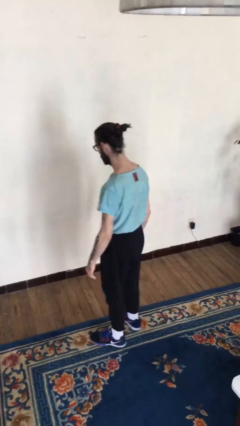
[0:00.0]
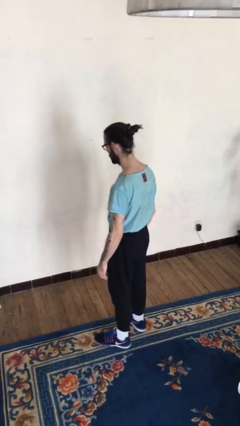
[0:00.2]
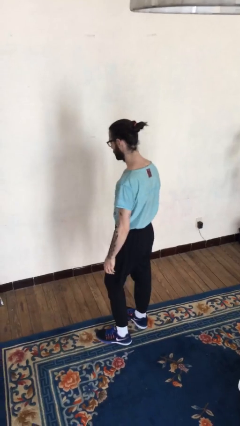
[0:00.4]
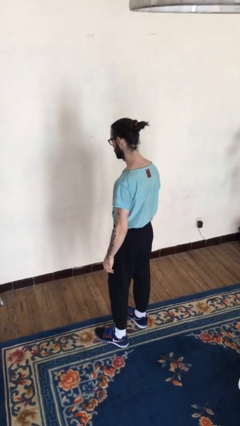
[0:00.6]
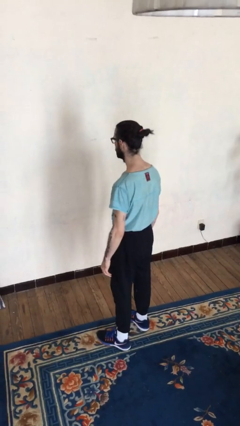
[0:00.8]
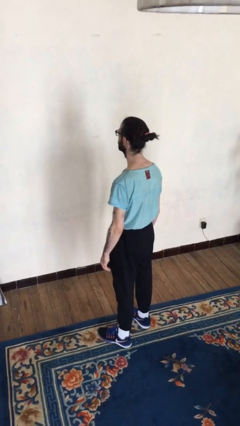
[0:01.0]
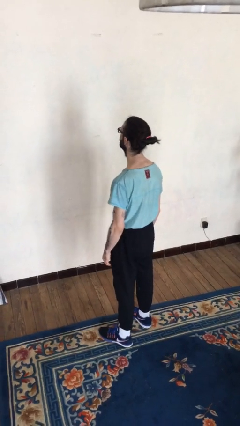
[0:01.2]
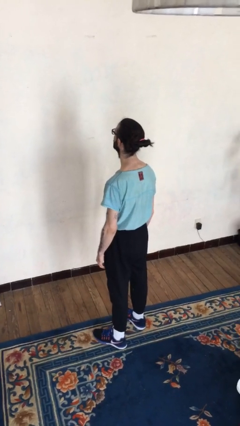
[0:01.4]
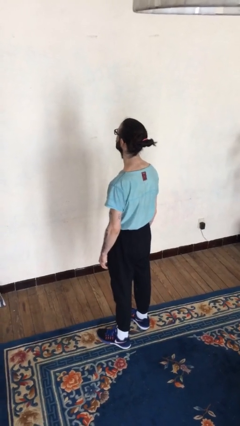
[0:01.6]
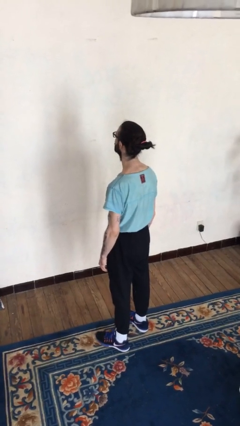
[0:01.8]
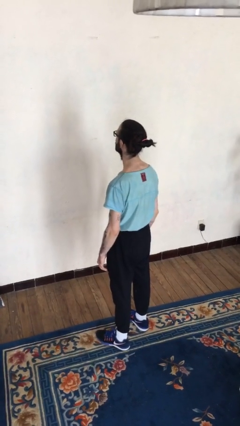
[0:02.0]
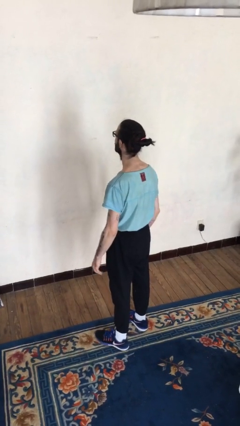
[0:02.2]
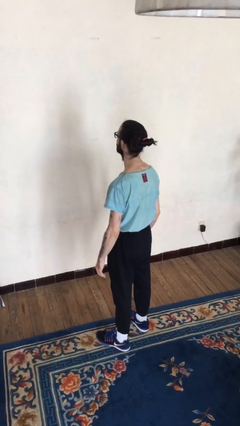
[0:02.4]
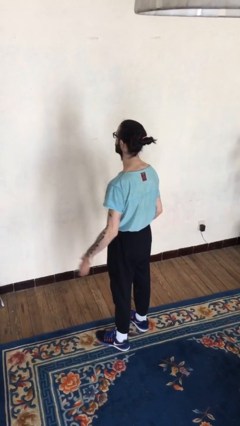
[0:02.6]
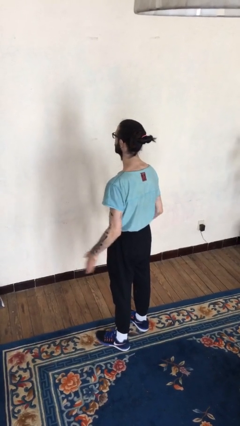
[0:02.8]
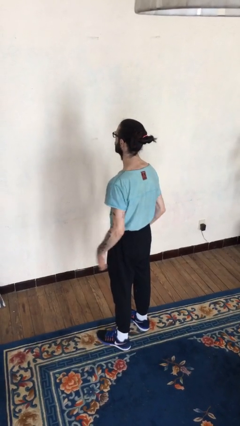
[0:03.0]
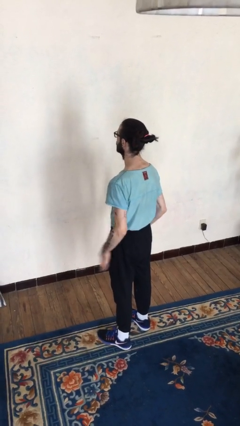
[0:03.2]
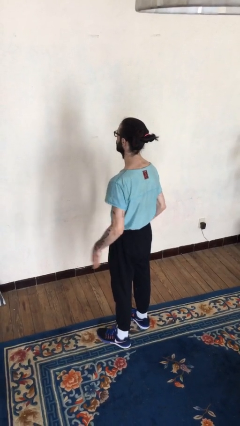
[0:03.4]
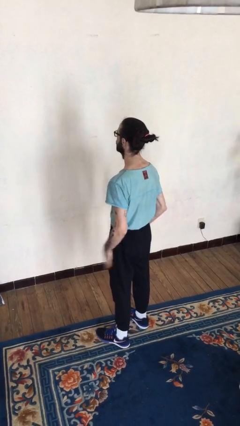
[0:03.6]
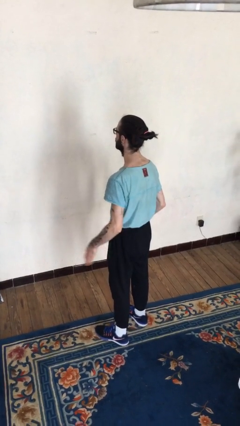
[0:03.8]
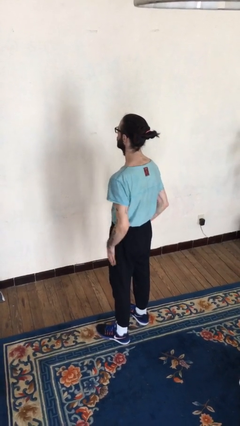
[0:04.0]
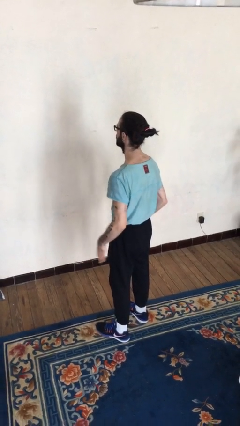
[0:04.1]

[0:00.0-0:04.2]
person slaps hands on thighs

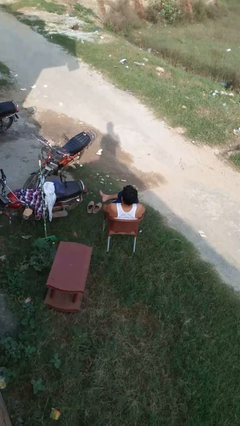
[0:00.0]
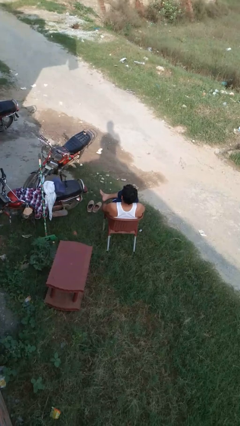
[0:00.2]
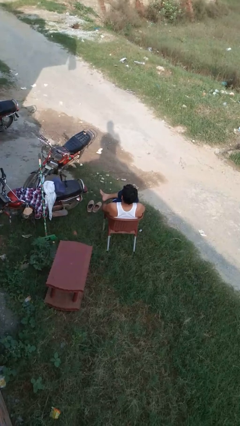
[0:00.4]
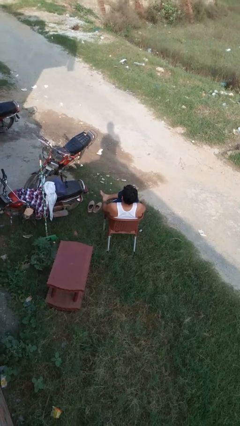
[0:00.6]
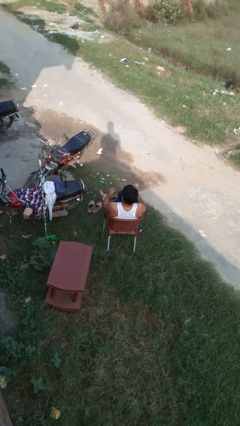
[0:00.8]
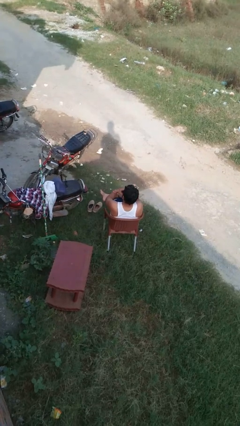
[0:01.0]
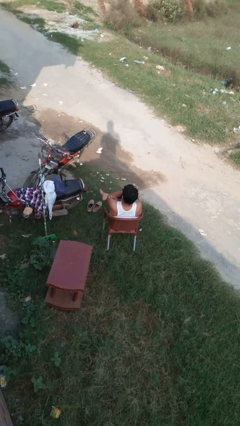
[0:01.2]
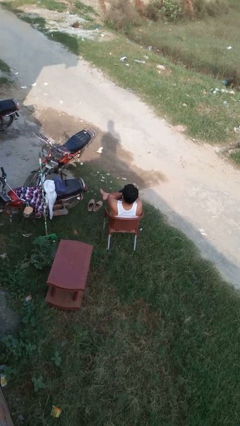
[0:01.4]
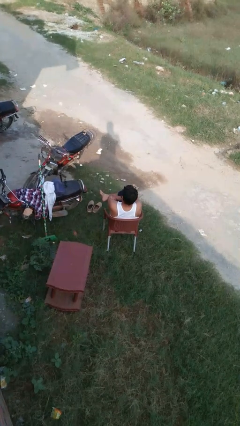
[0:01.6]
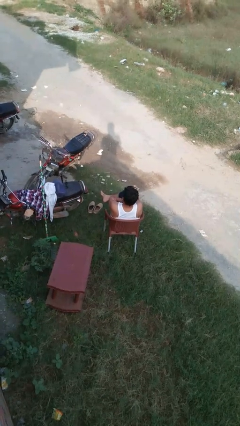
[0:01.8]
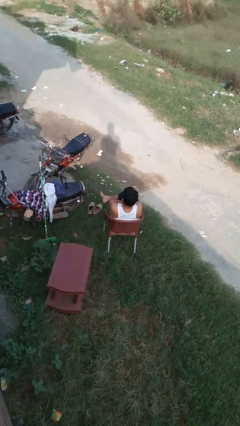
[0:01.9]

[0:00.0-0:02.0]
person crosses arms

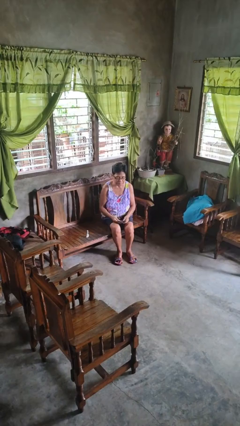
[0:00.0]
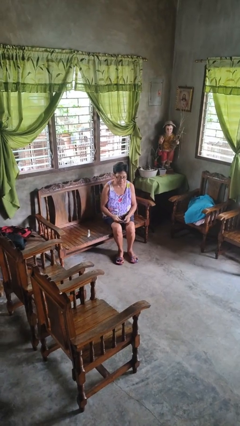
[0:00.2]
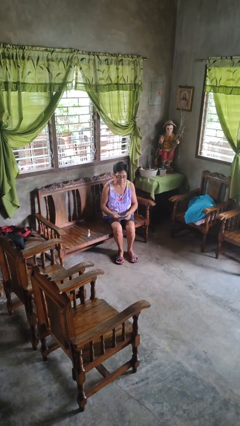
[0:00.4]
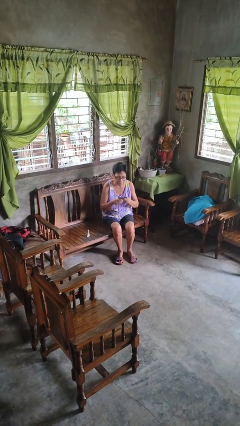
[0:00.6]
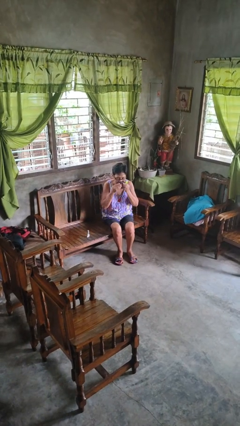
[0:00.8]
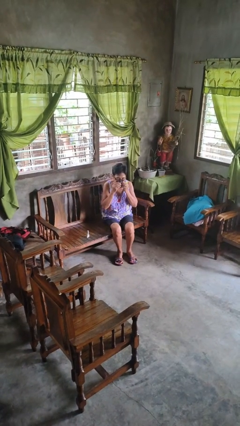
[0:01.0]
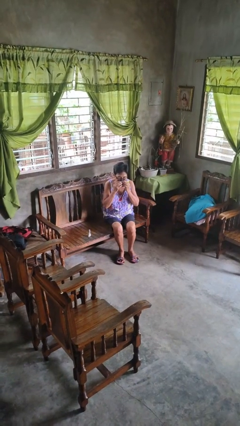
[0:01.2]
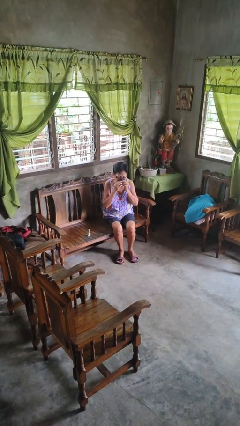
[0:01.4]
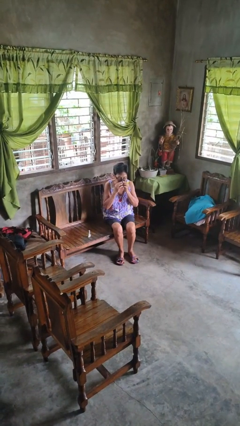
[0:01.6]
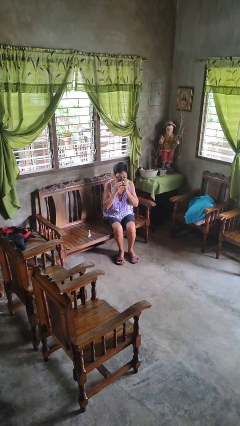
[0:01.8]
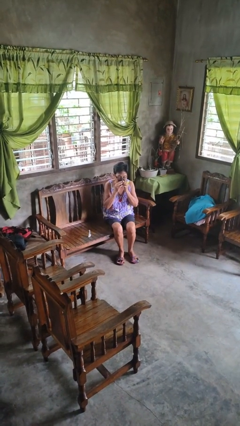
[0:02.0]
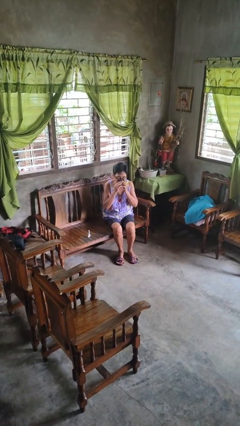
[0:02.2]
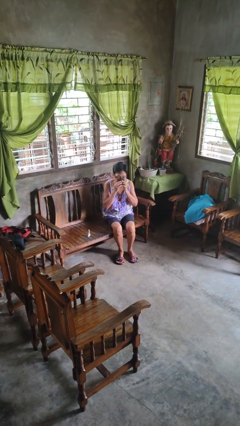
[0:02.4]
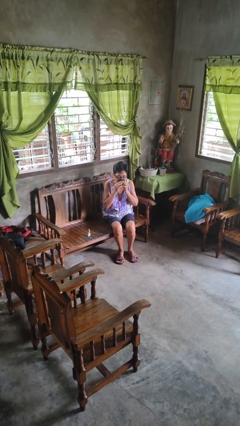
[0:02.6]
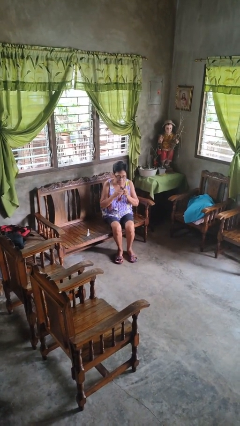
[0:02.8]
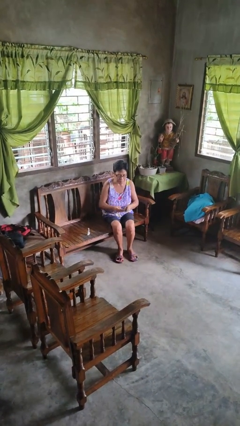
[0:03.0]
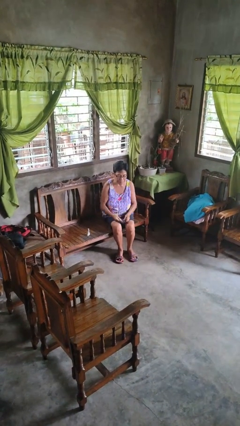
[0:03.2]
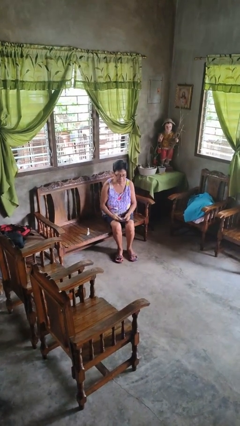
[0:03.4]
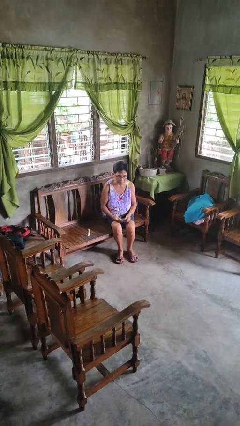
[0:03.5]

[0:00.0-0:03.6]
person blows nose

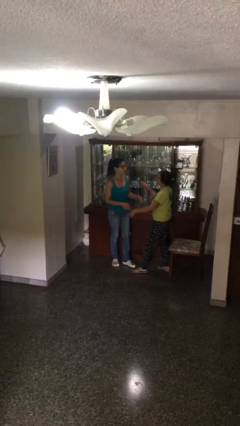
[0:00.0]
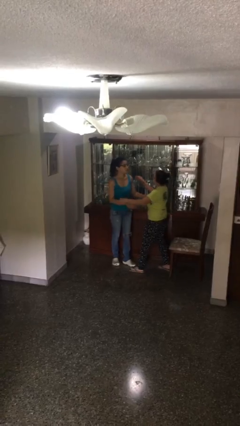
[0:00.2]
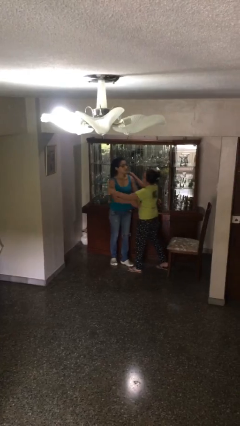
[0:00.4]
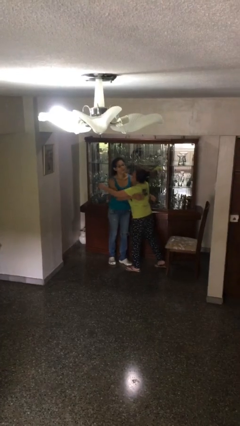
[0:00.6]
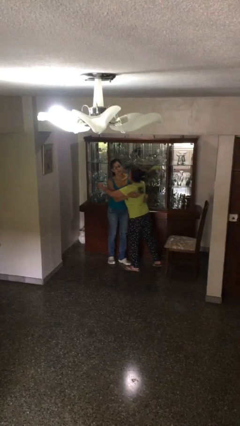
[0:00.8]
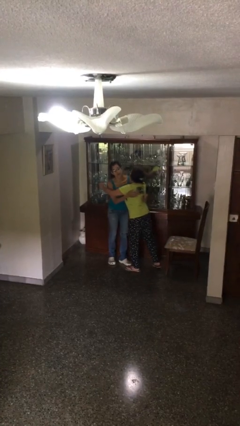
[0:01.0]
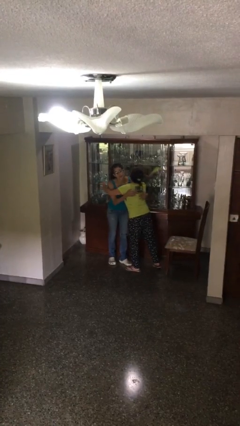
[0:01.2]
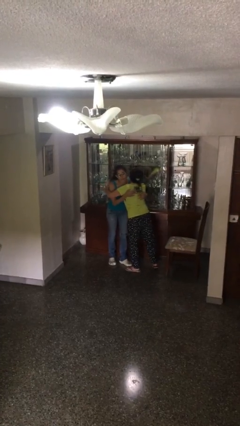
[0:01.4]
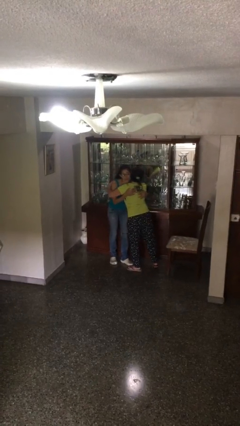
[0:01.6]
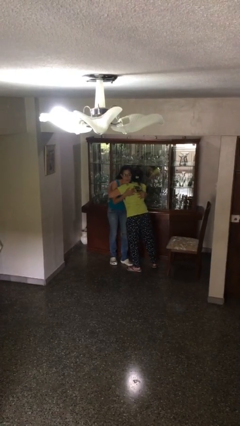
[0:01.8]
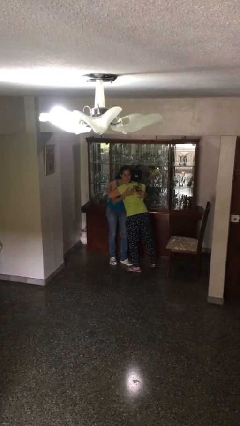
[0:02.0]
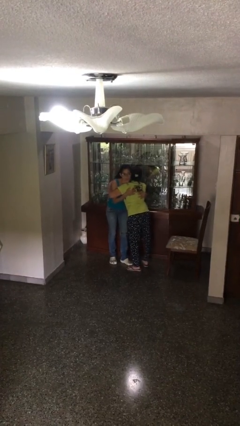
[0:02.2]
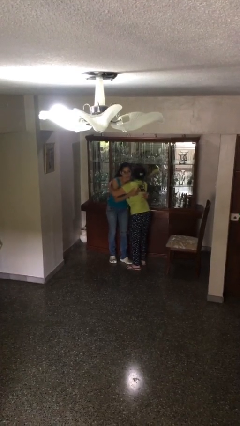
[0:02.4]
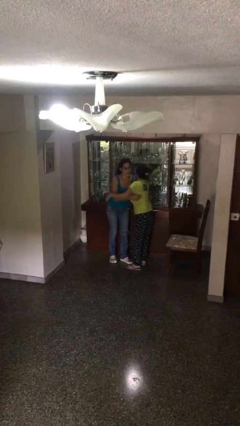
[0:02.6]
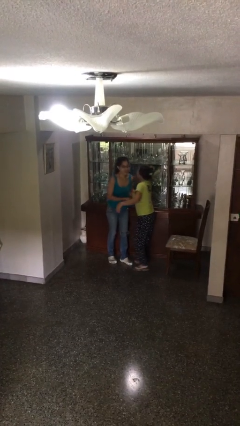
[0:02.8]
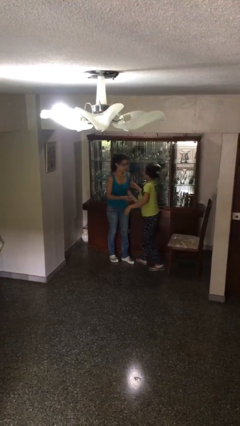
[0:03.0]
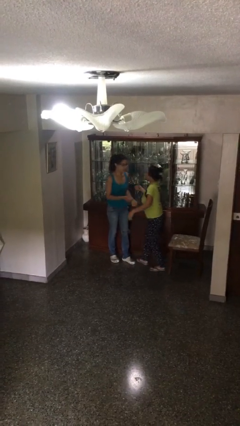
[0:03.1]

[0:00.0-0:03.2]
person embraces person

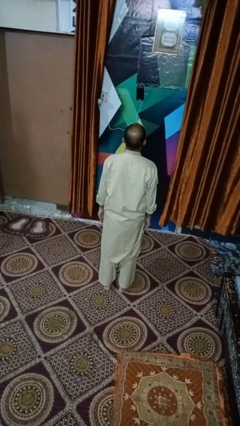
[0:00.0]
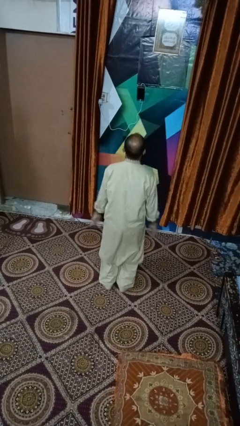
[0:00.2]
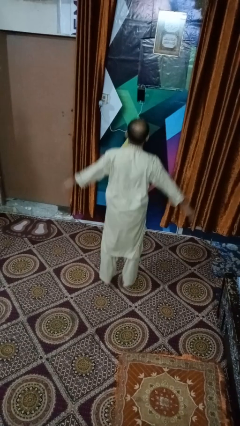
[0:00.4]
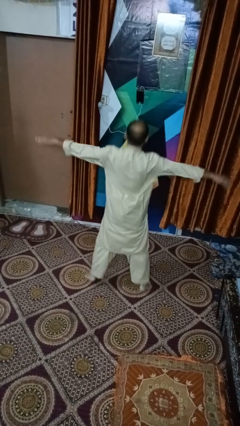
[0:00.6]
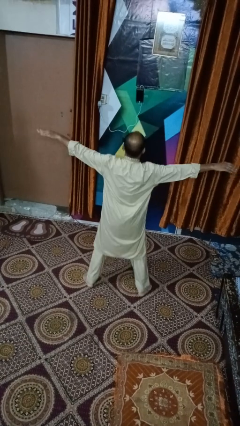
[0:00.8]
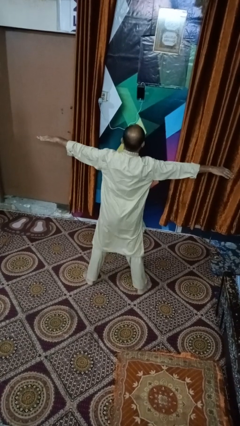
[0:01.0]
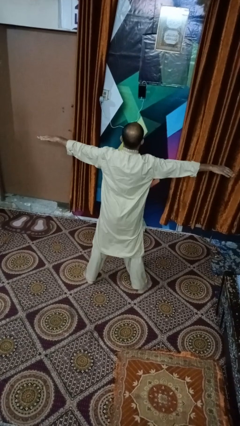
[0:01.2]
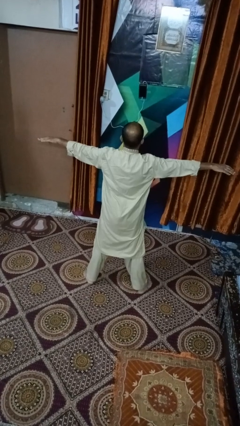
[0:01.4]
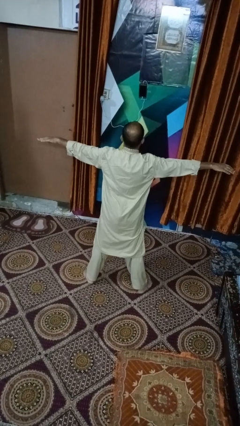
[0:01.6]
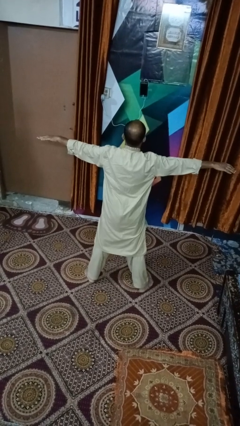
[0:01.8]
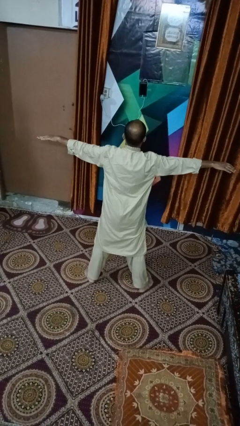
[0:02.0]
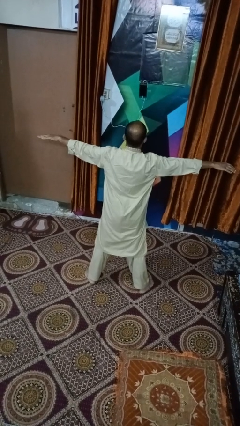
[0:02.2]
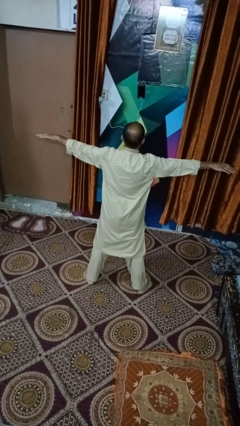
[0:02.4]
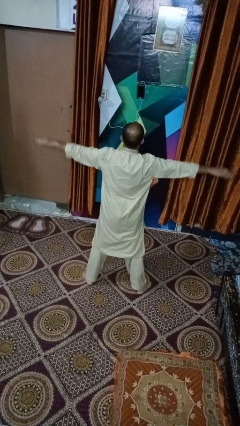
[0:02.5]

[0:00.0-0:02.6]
person exercises with jumping jacks

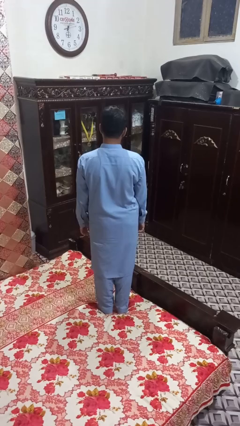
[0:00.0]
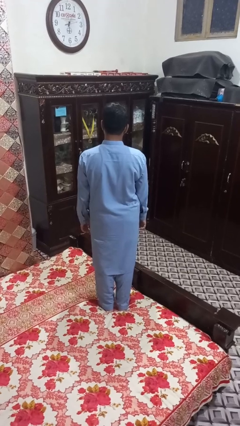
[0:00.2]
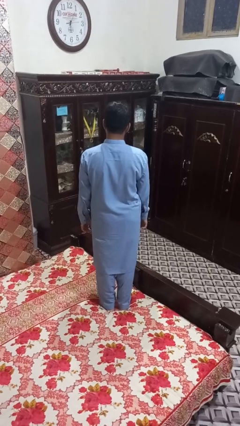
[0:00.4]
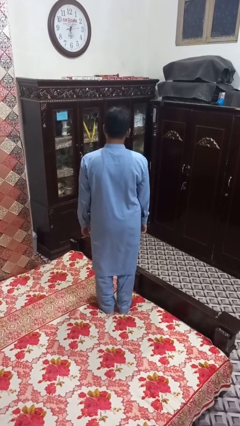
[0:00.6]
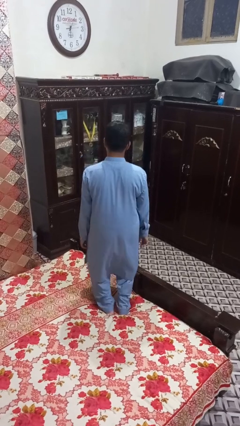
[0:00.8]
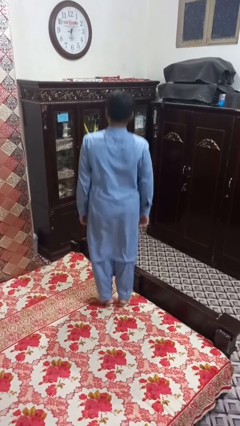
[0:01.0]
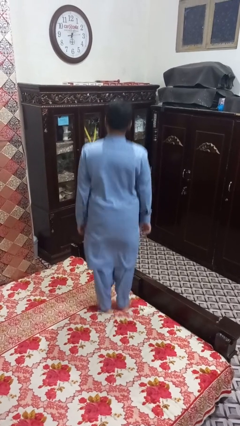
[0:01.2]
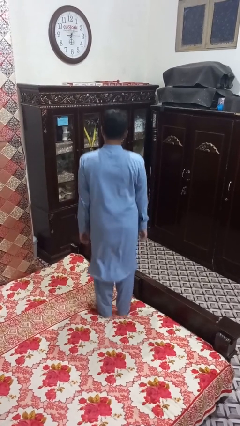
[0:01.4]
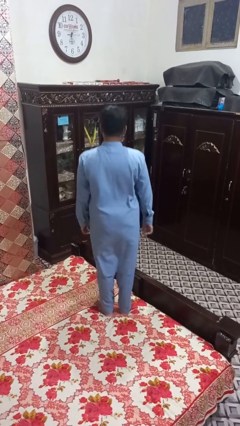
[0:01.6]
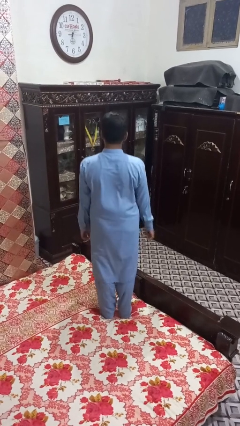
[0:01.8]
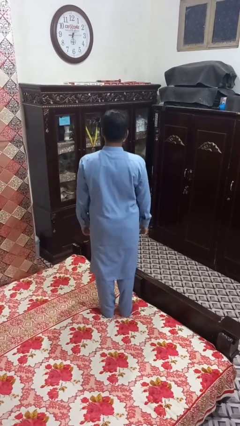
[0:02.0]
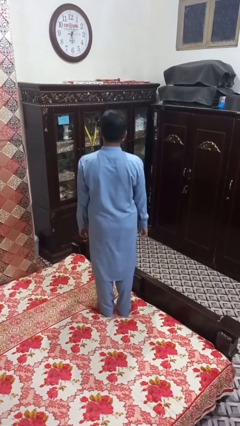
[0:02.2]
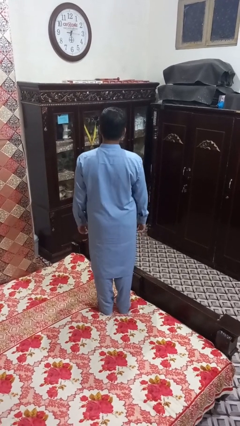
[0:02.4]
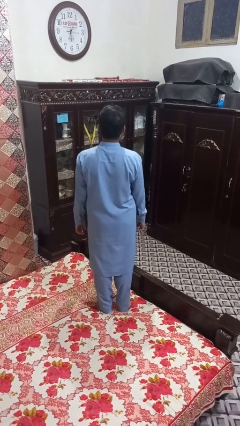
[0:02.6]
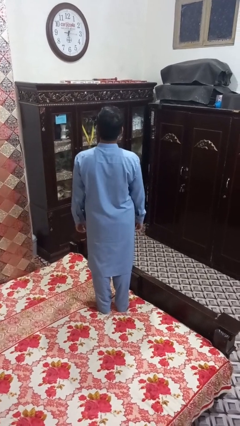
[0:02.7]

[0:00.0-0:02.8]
person jumps on bed
